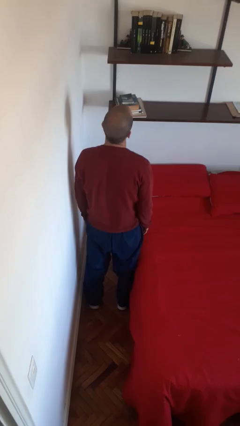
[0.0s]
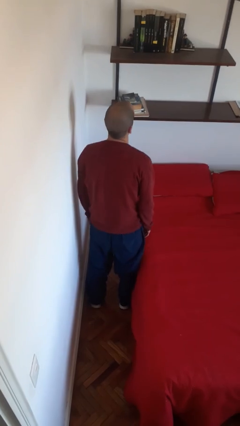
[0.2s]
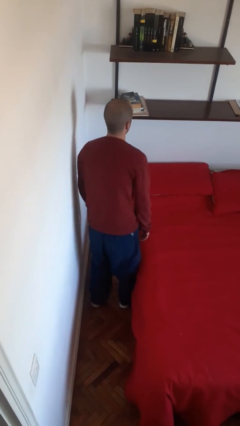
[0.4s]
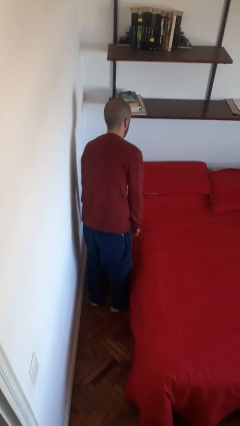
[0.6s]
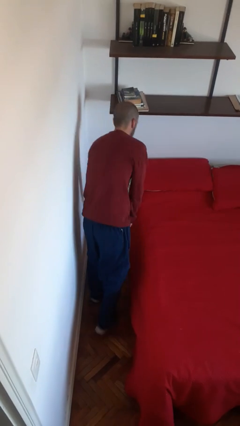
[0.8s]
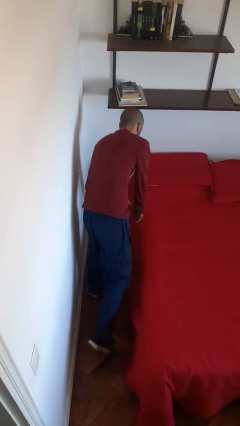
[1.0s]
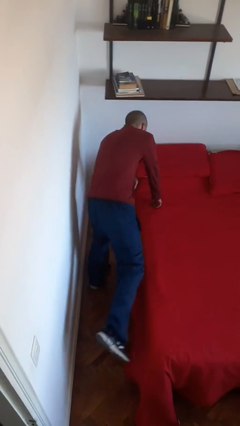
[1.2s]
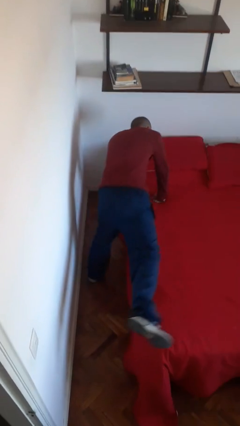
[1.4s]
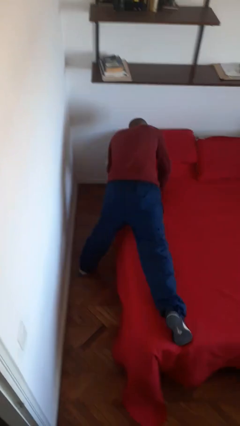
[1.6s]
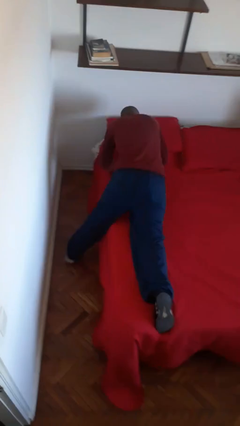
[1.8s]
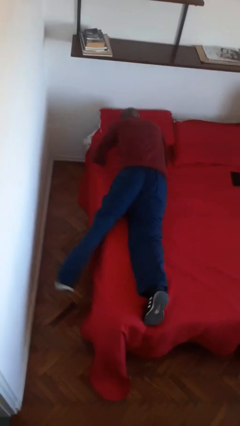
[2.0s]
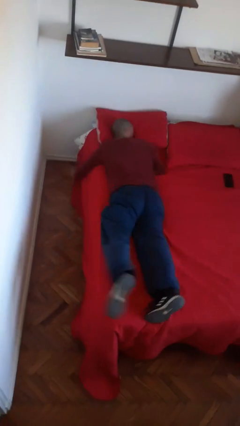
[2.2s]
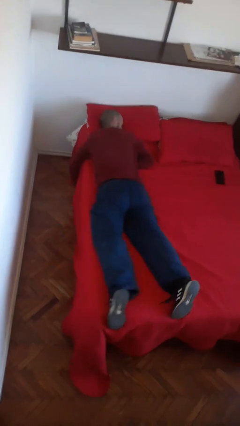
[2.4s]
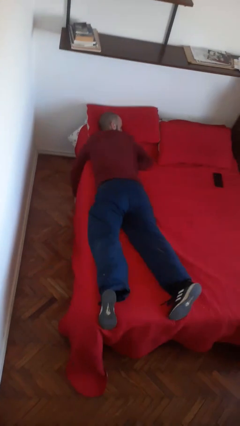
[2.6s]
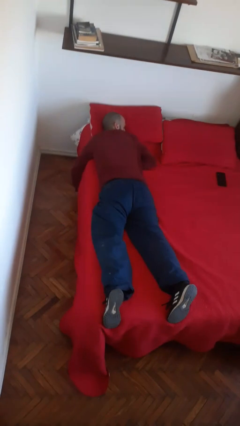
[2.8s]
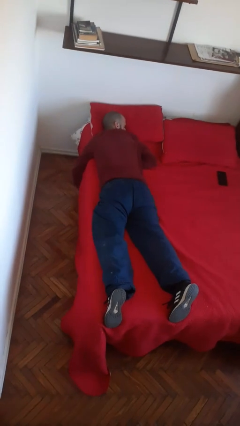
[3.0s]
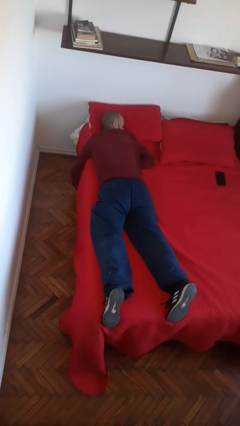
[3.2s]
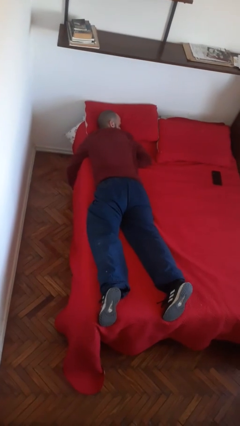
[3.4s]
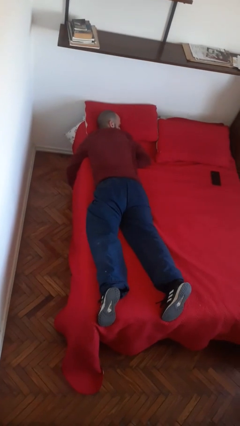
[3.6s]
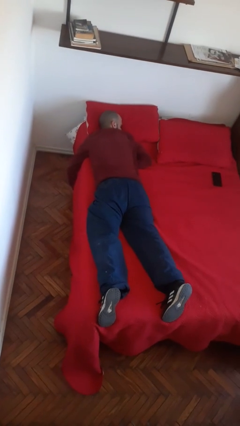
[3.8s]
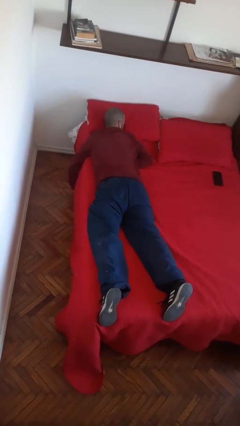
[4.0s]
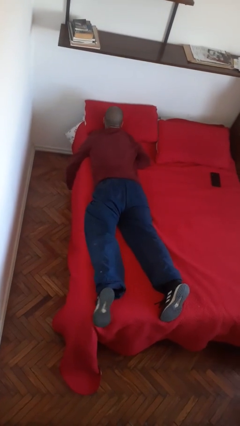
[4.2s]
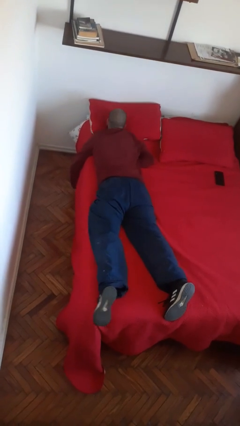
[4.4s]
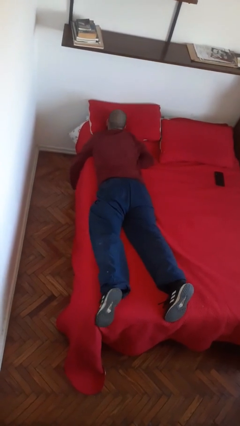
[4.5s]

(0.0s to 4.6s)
person lies down on bed

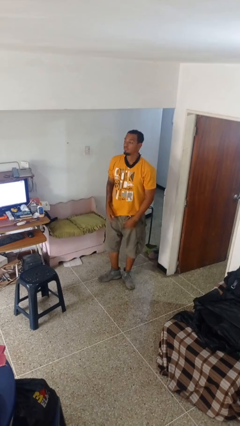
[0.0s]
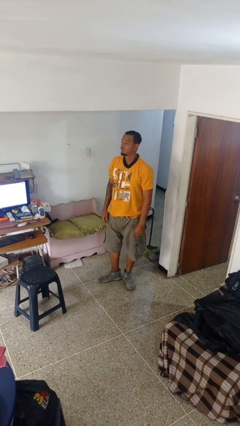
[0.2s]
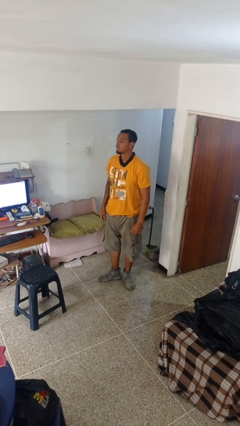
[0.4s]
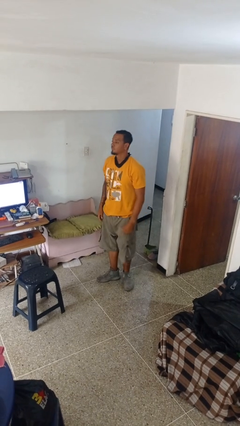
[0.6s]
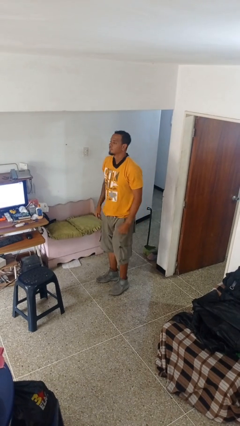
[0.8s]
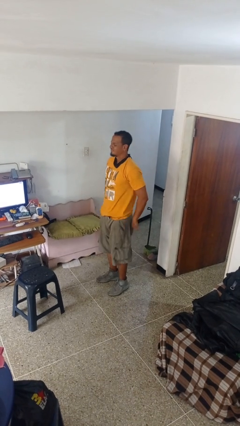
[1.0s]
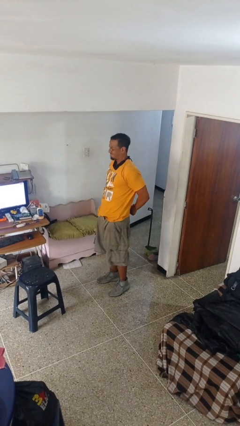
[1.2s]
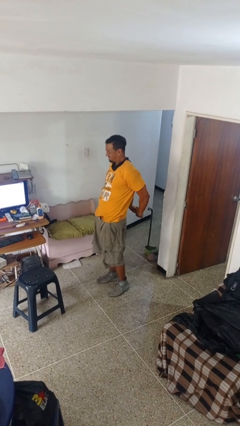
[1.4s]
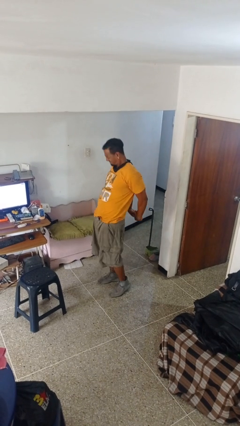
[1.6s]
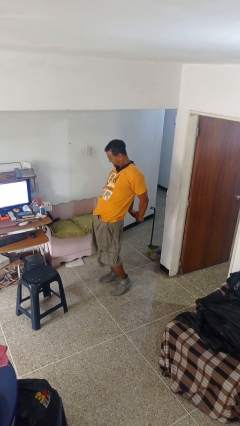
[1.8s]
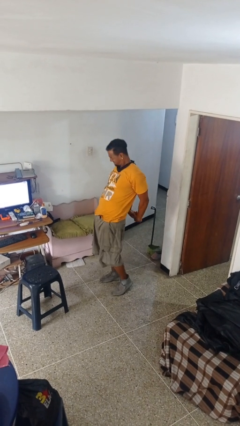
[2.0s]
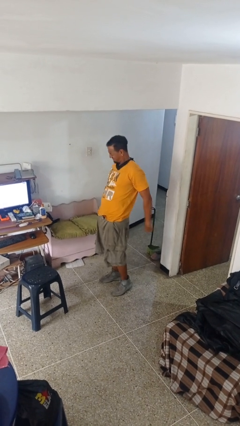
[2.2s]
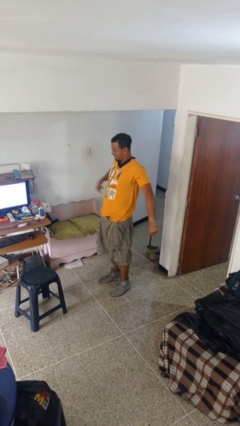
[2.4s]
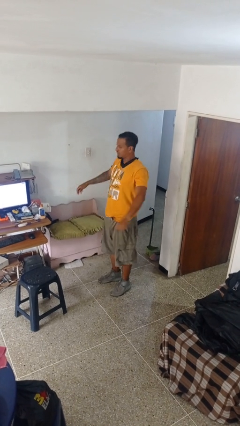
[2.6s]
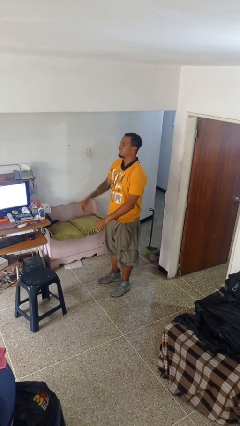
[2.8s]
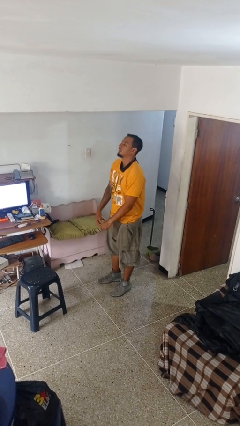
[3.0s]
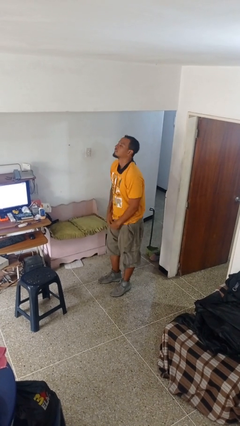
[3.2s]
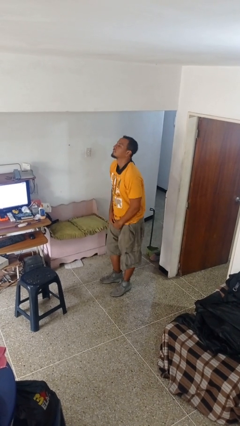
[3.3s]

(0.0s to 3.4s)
person stretches back

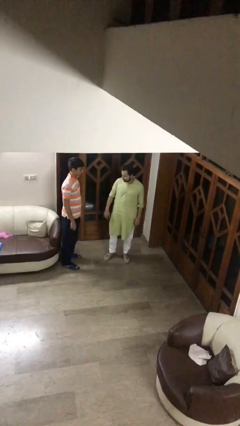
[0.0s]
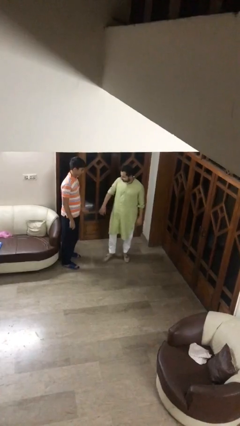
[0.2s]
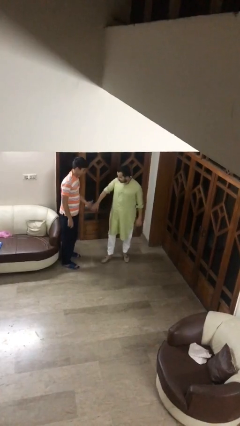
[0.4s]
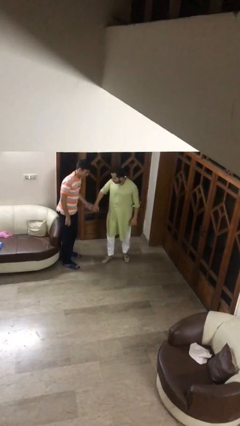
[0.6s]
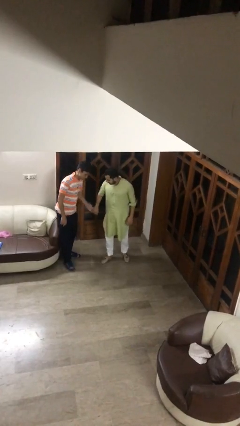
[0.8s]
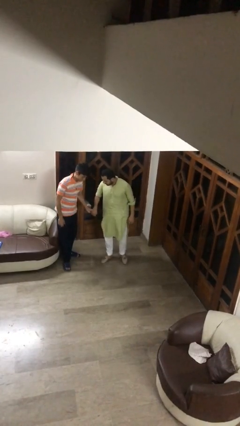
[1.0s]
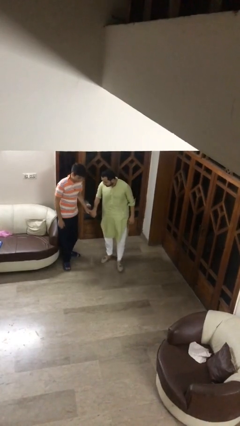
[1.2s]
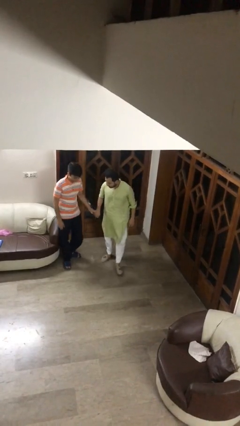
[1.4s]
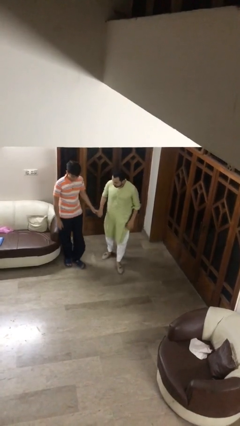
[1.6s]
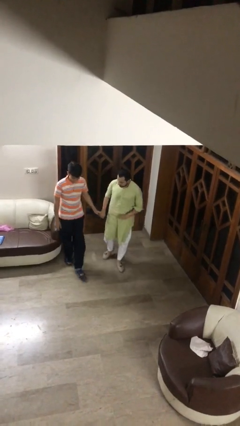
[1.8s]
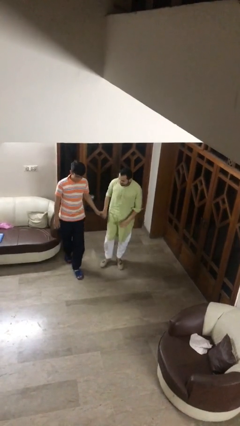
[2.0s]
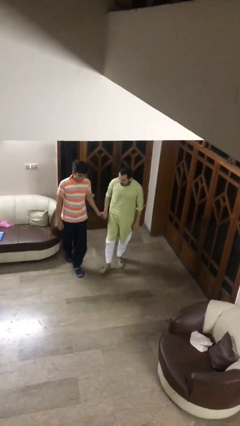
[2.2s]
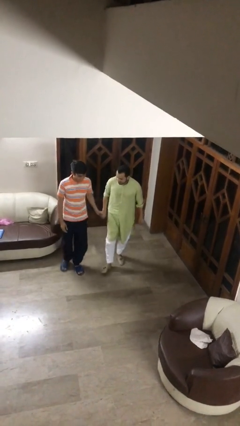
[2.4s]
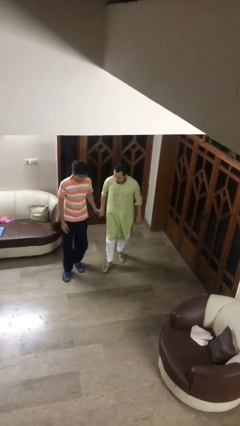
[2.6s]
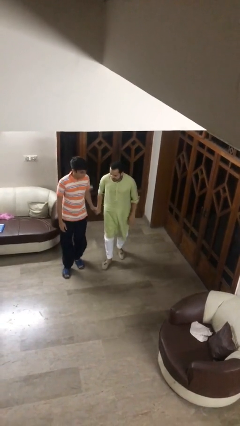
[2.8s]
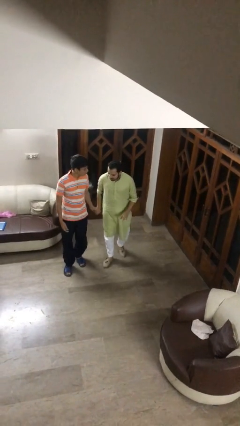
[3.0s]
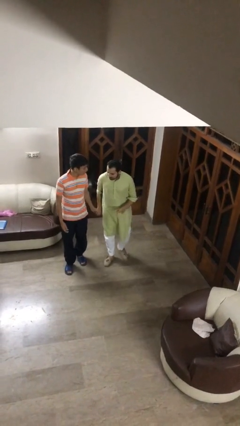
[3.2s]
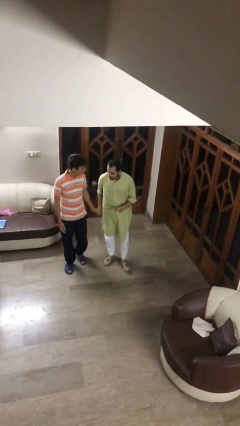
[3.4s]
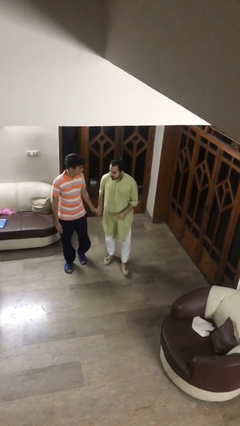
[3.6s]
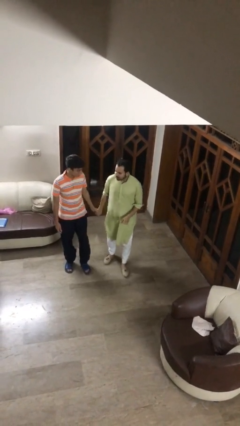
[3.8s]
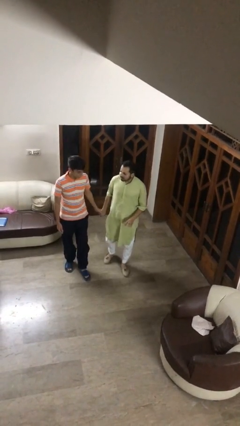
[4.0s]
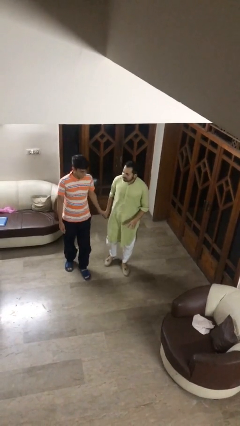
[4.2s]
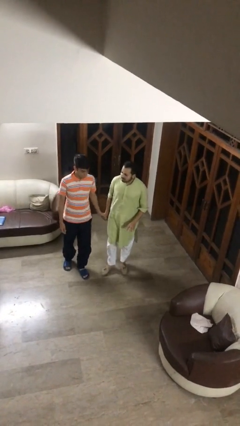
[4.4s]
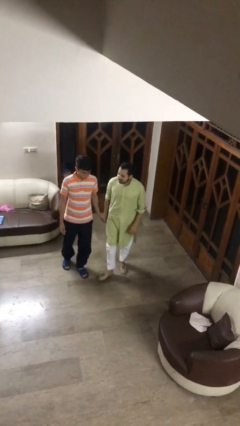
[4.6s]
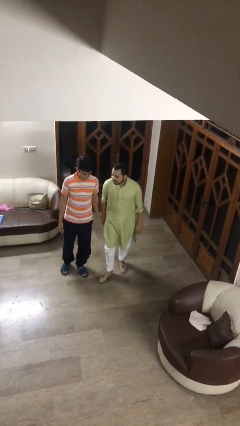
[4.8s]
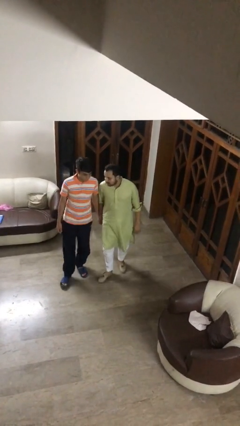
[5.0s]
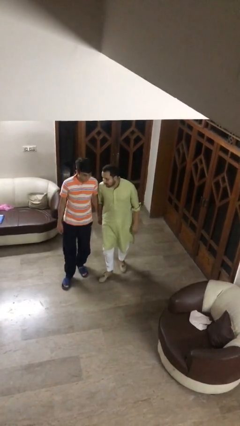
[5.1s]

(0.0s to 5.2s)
person holds hand

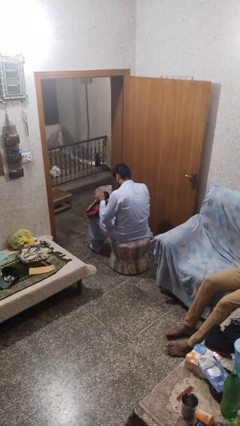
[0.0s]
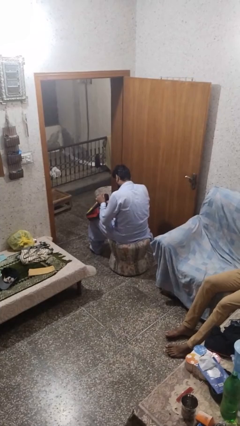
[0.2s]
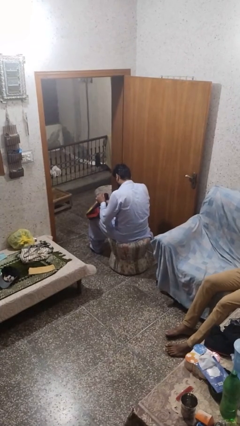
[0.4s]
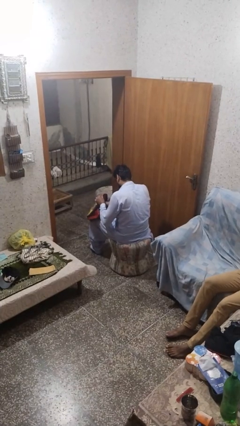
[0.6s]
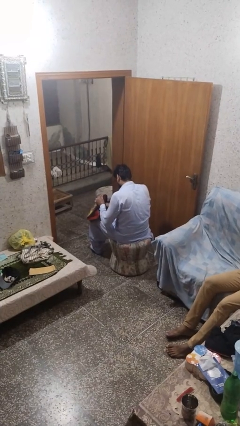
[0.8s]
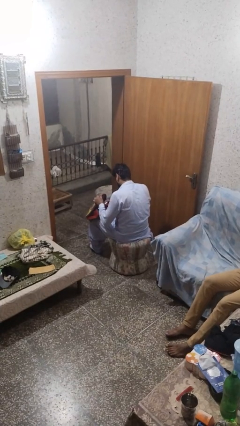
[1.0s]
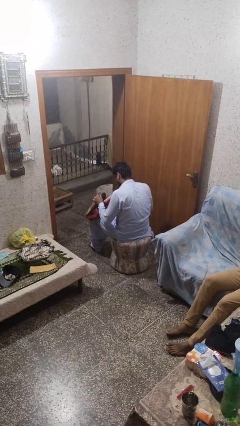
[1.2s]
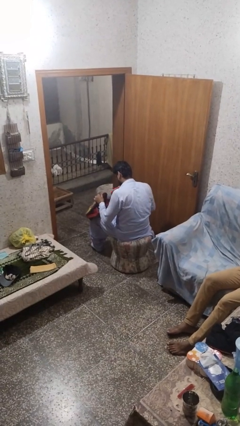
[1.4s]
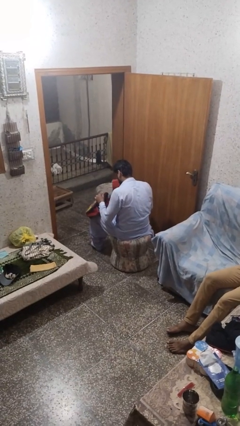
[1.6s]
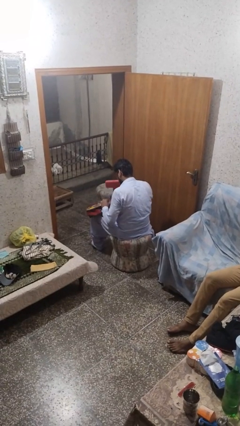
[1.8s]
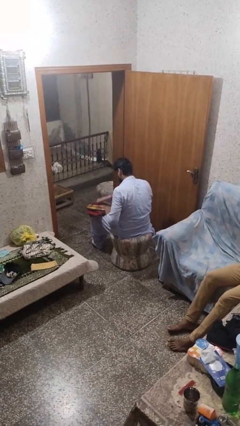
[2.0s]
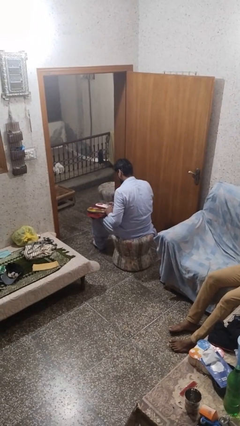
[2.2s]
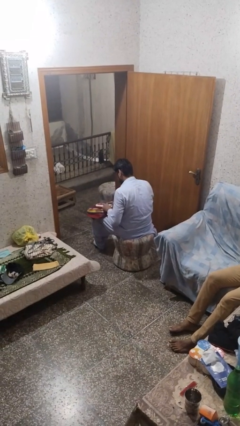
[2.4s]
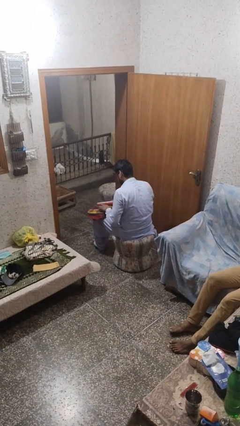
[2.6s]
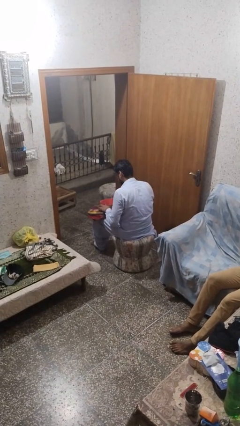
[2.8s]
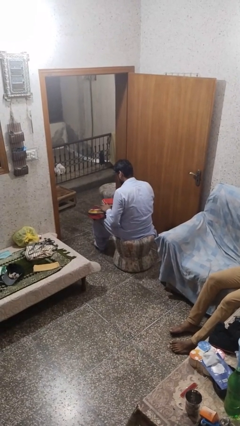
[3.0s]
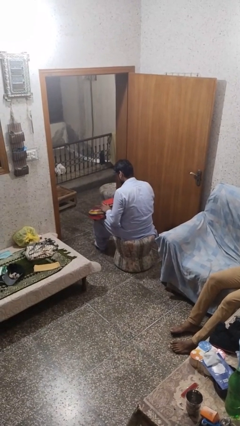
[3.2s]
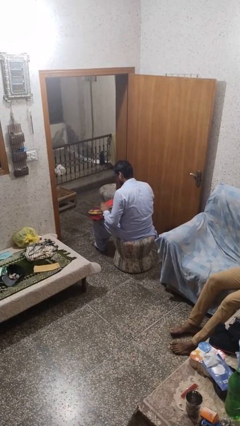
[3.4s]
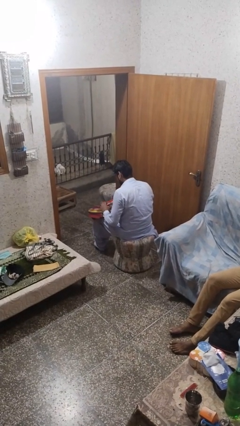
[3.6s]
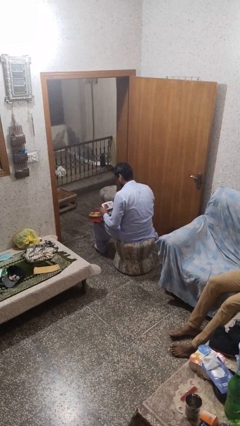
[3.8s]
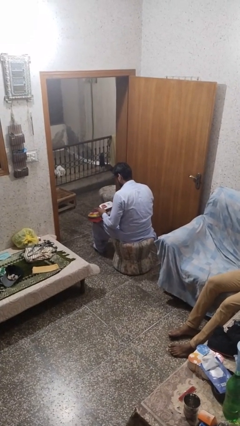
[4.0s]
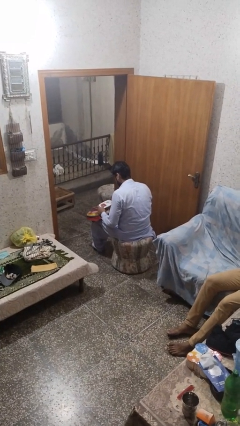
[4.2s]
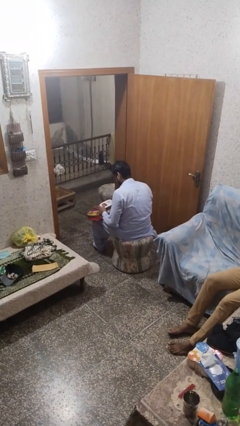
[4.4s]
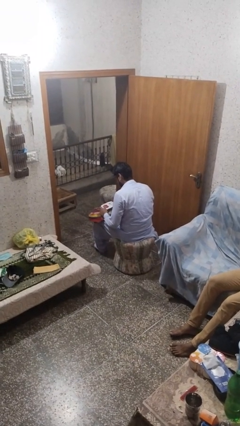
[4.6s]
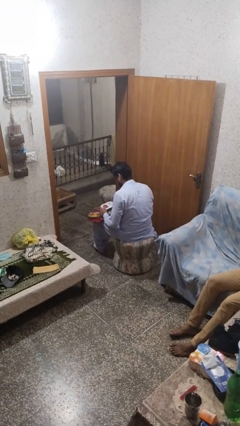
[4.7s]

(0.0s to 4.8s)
person takes object from backpack
